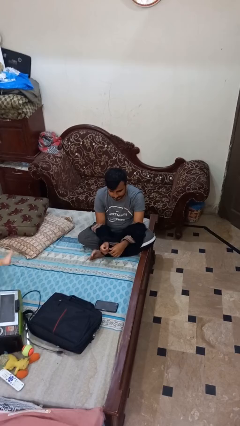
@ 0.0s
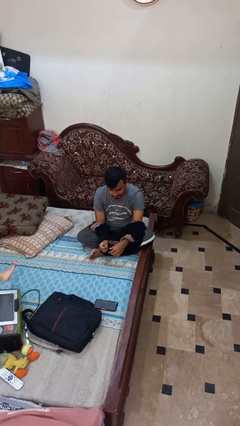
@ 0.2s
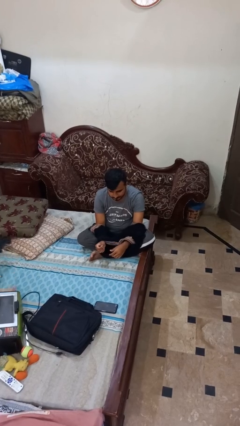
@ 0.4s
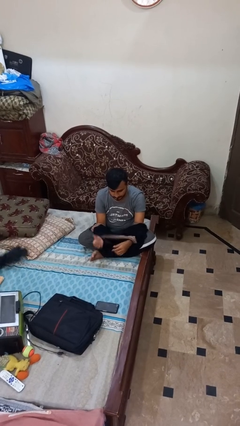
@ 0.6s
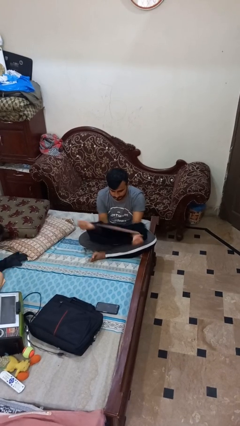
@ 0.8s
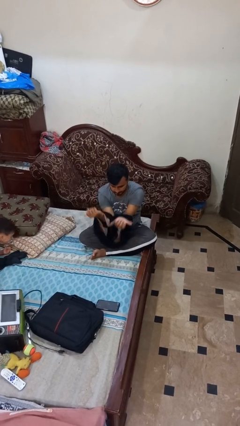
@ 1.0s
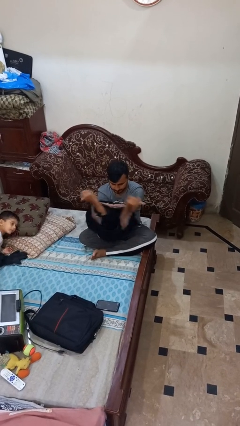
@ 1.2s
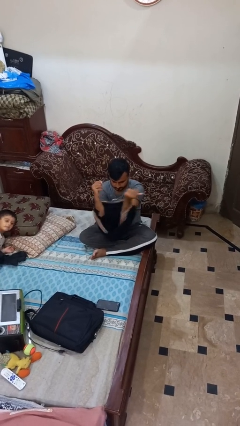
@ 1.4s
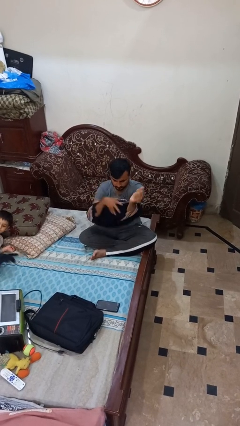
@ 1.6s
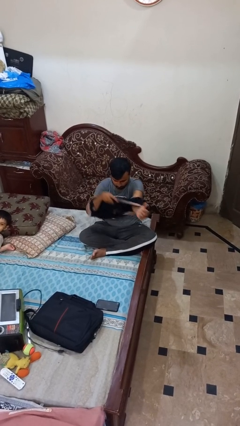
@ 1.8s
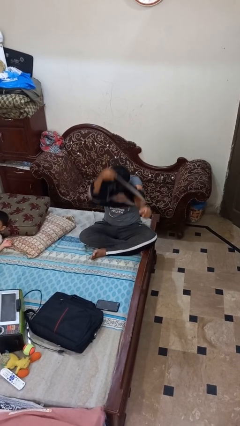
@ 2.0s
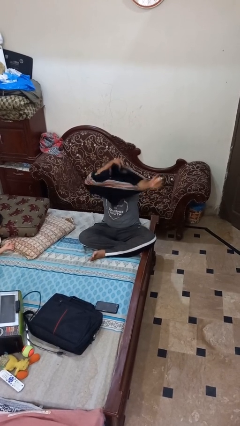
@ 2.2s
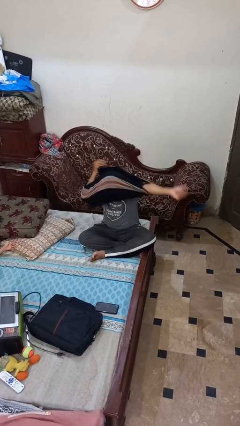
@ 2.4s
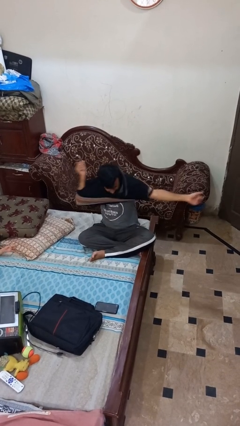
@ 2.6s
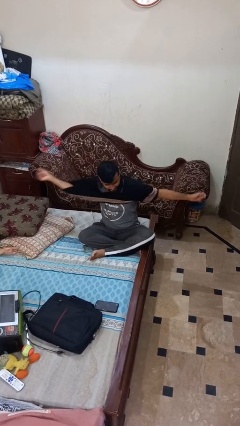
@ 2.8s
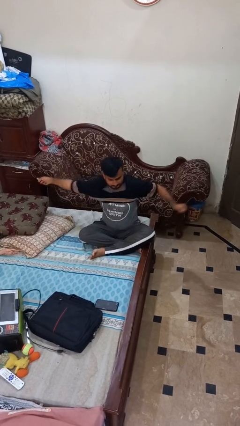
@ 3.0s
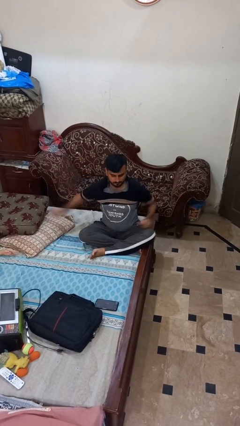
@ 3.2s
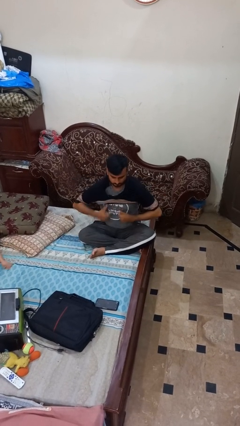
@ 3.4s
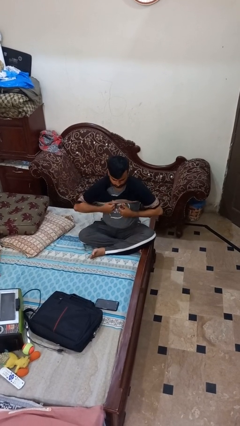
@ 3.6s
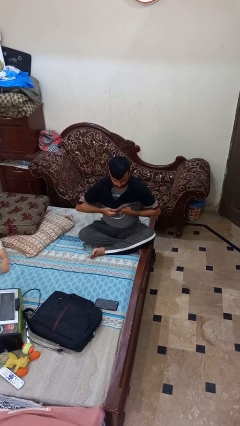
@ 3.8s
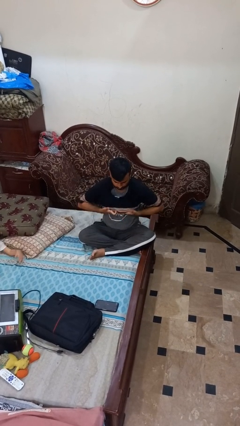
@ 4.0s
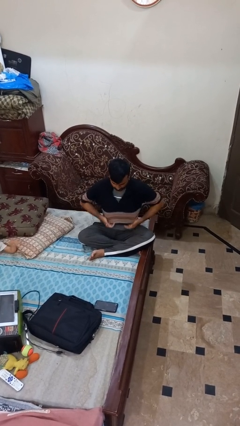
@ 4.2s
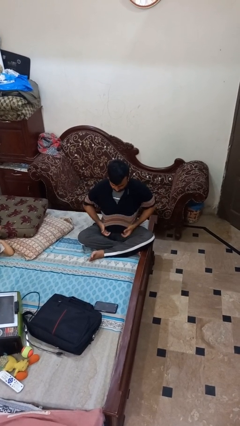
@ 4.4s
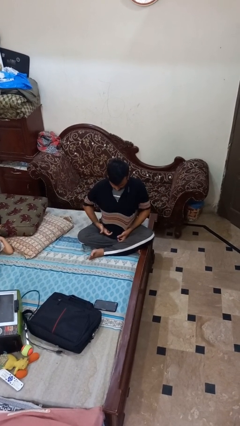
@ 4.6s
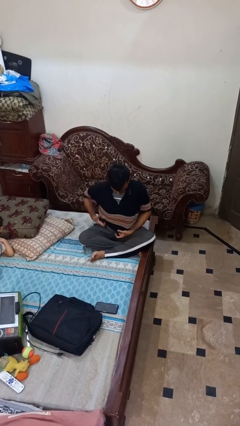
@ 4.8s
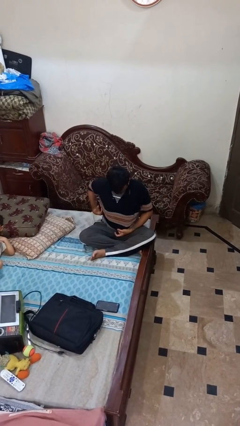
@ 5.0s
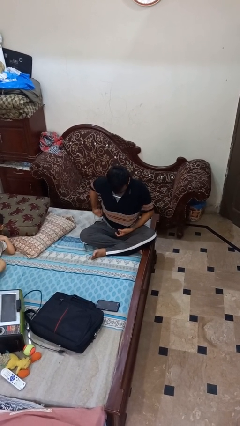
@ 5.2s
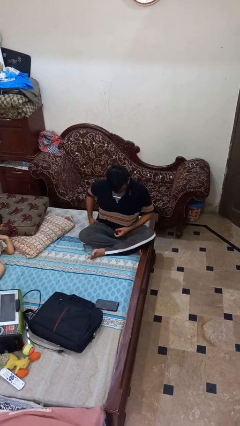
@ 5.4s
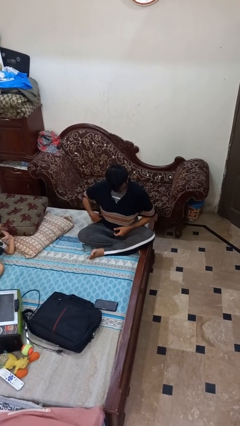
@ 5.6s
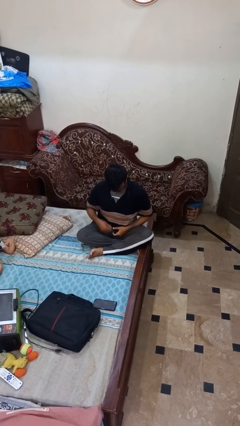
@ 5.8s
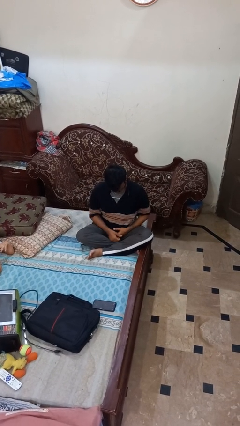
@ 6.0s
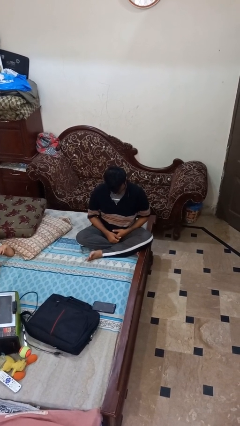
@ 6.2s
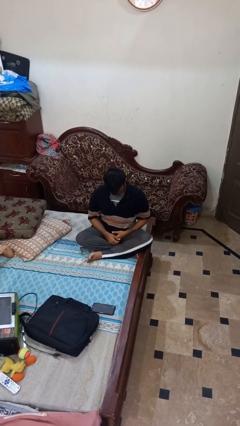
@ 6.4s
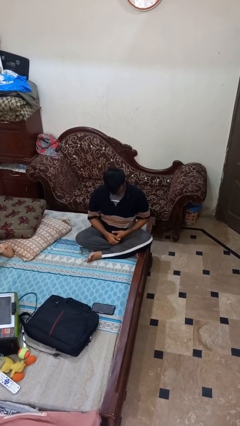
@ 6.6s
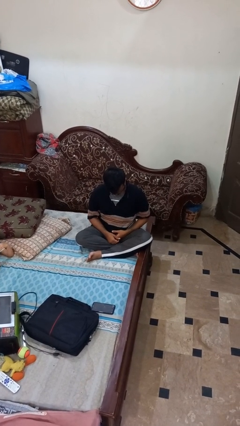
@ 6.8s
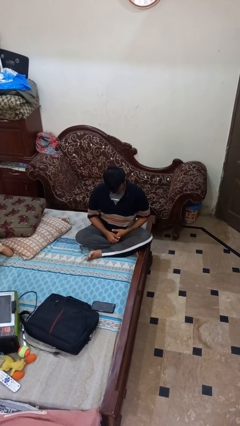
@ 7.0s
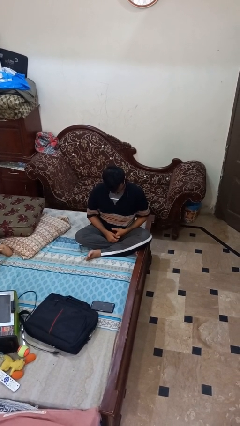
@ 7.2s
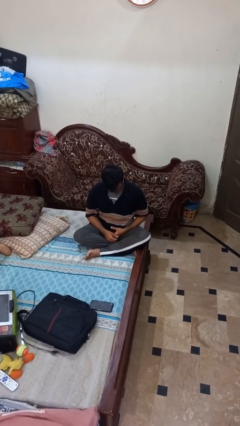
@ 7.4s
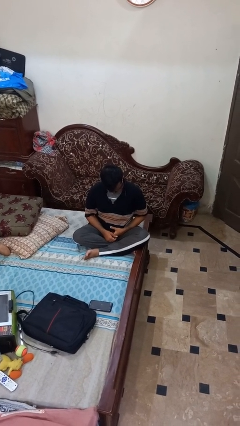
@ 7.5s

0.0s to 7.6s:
person puts on shirt

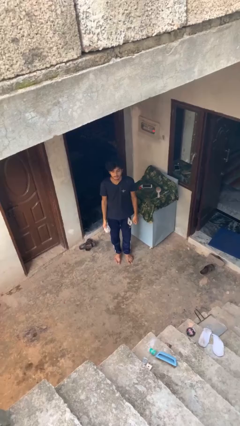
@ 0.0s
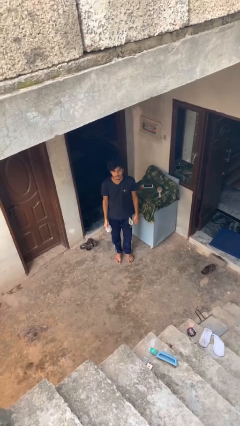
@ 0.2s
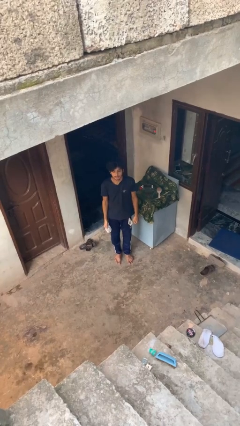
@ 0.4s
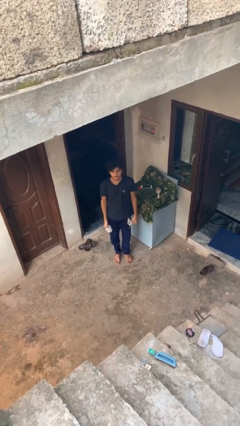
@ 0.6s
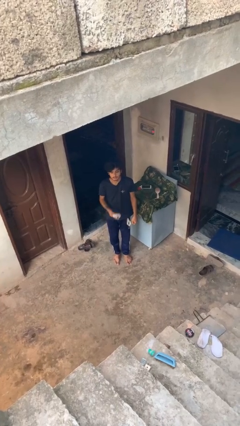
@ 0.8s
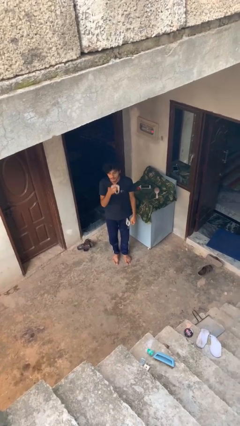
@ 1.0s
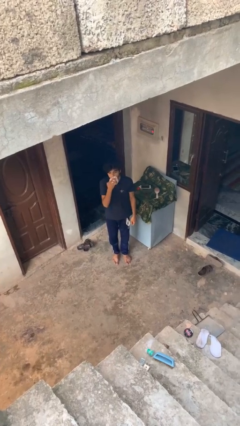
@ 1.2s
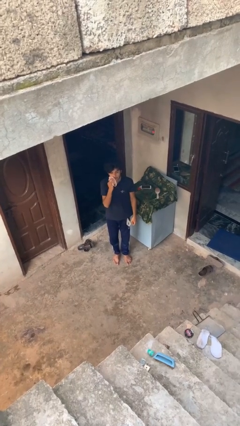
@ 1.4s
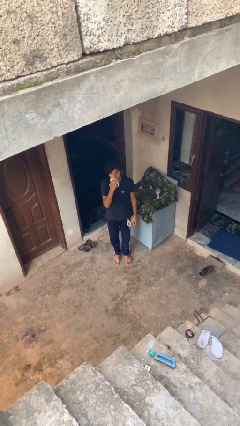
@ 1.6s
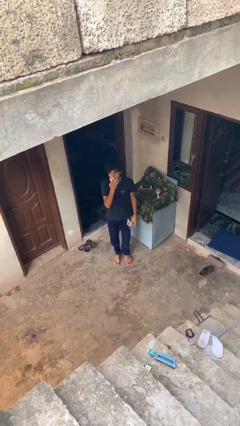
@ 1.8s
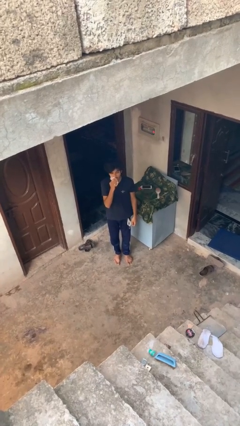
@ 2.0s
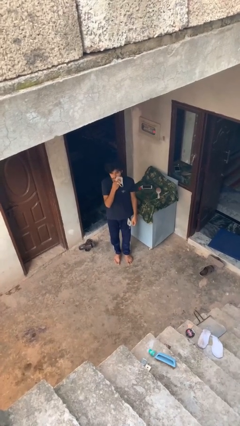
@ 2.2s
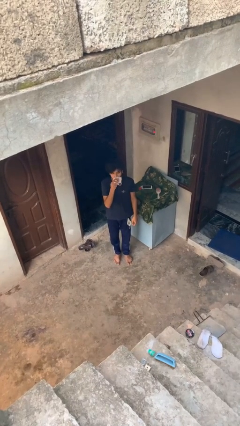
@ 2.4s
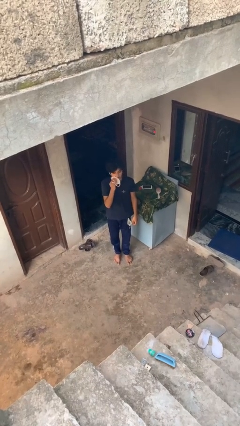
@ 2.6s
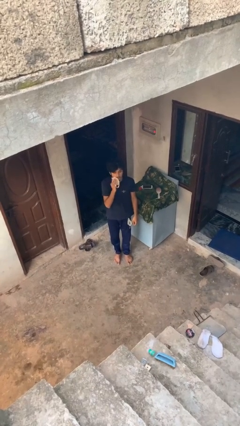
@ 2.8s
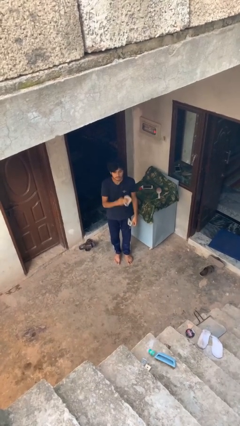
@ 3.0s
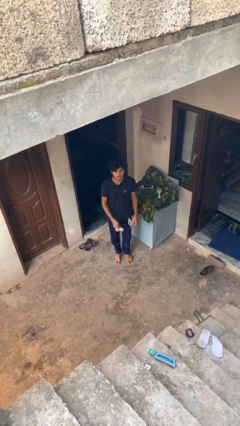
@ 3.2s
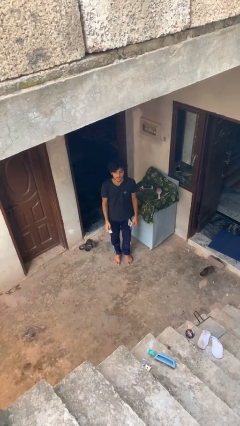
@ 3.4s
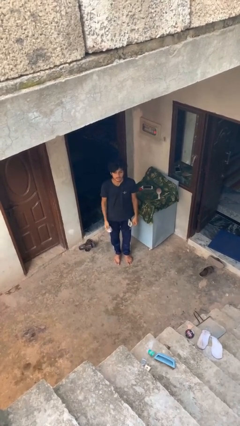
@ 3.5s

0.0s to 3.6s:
person wipes mouth with napkin

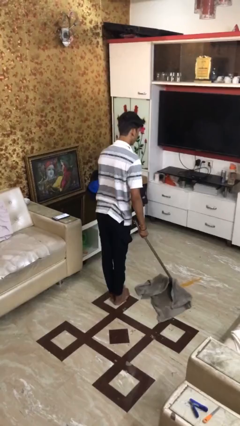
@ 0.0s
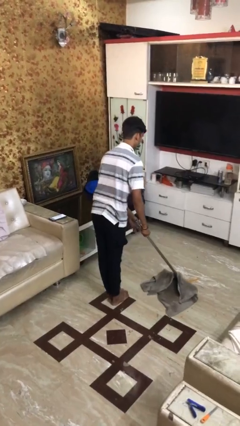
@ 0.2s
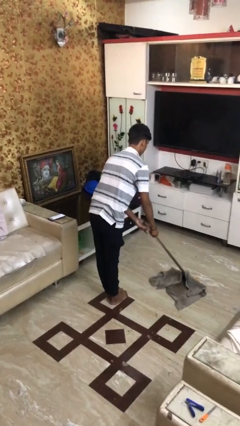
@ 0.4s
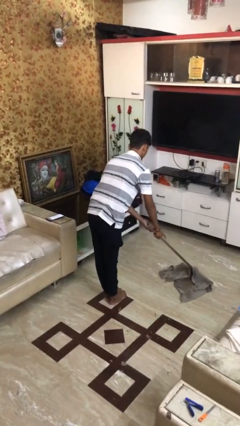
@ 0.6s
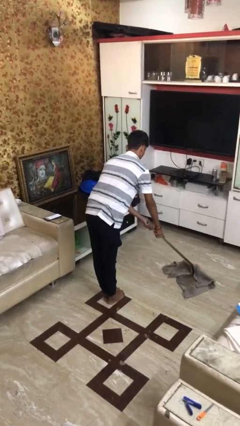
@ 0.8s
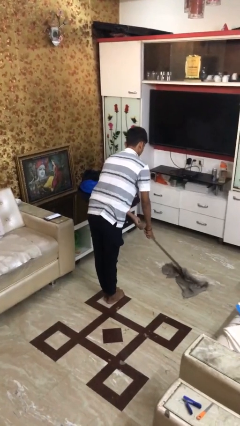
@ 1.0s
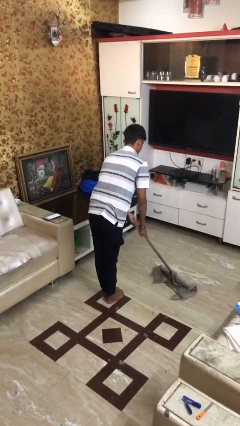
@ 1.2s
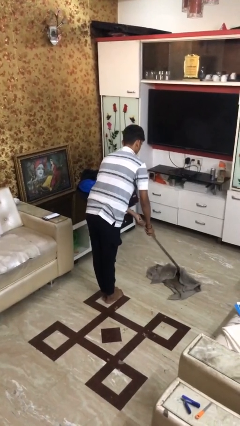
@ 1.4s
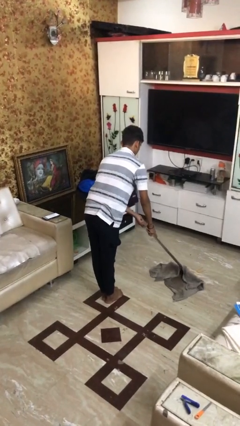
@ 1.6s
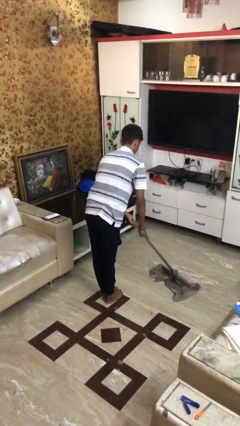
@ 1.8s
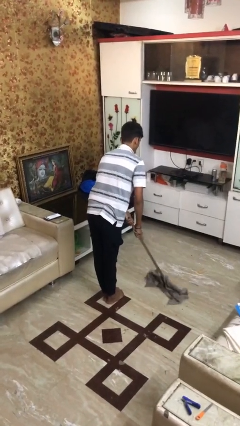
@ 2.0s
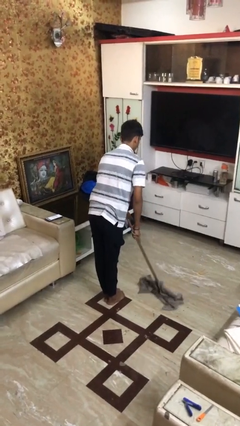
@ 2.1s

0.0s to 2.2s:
person mops

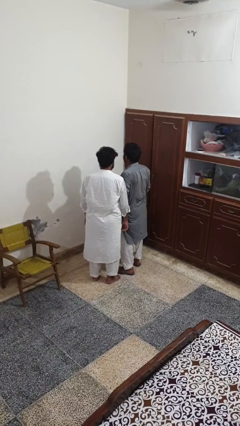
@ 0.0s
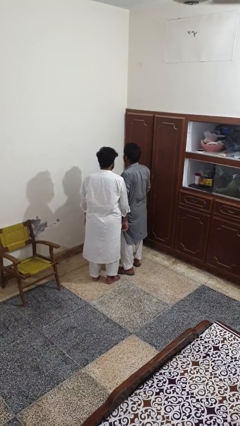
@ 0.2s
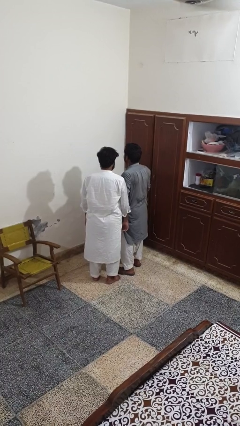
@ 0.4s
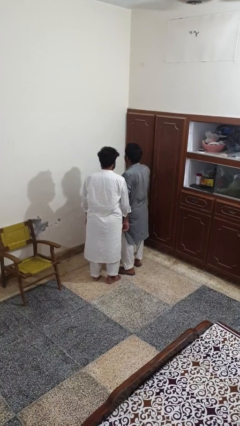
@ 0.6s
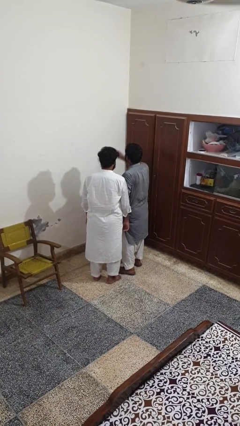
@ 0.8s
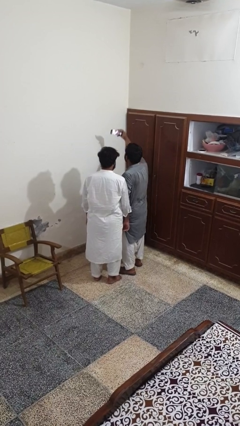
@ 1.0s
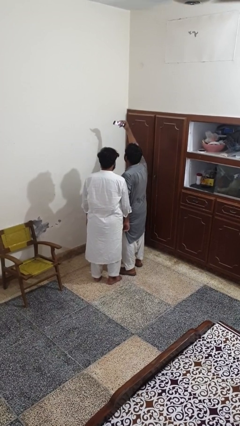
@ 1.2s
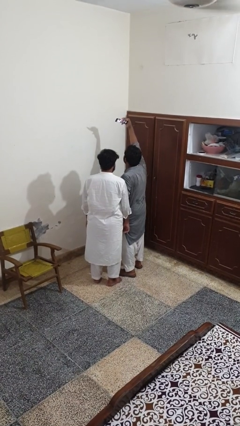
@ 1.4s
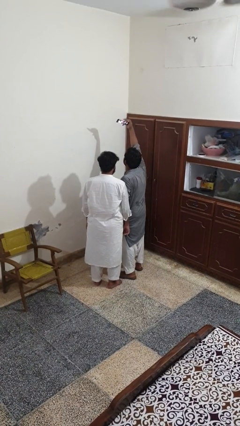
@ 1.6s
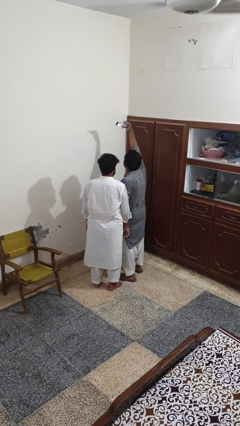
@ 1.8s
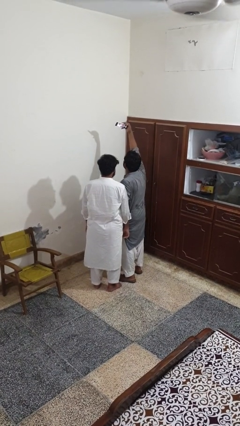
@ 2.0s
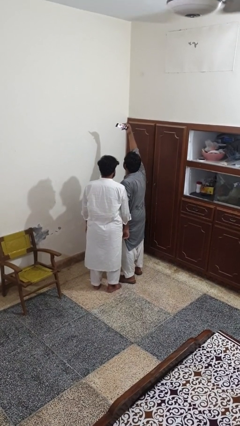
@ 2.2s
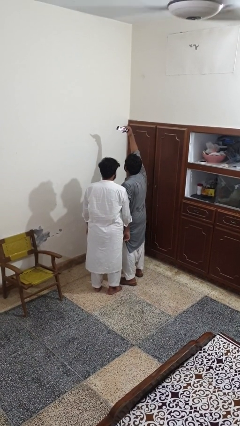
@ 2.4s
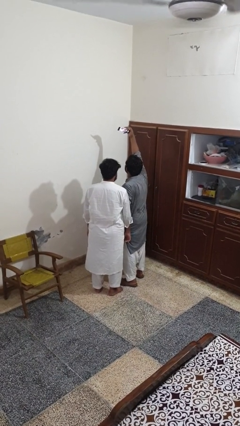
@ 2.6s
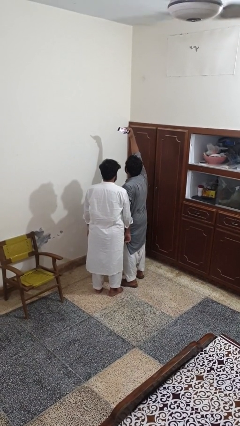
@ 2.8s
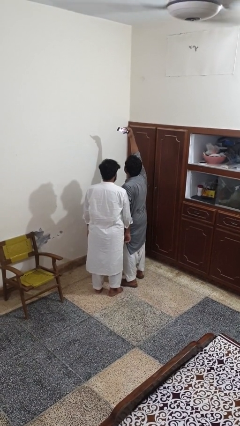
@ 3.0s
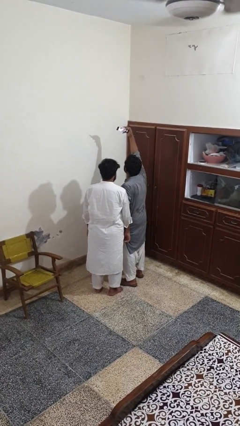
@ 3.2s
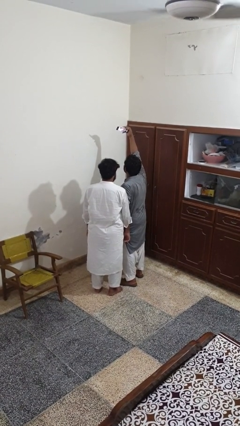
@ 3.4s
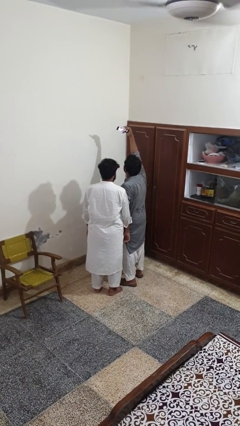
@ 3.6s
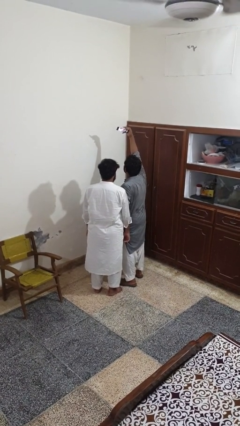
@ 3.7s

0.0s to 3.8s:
person takes selfie with person

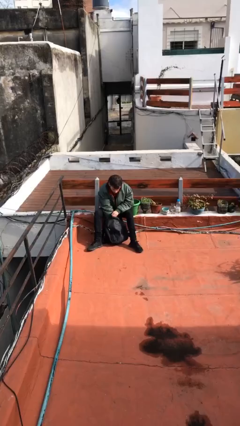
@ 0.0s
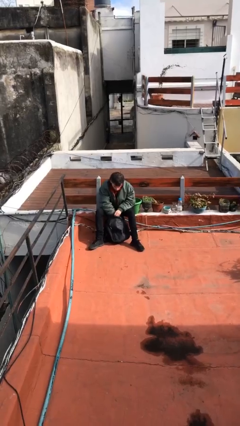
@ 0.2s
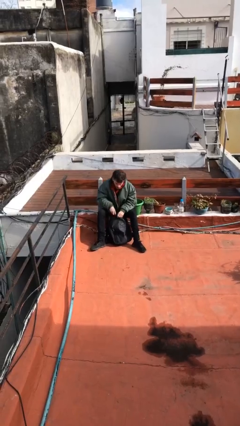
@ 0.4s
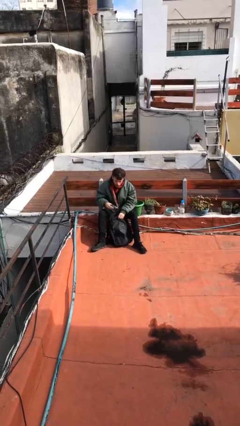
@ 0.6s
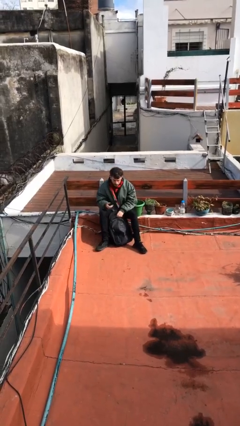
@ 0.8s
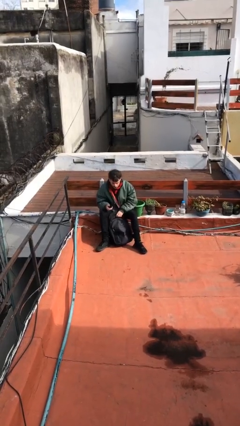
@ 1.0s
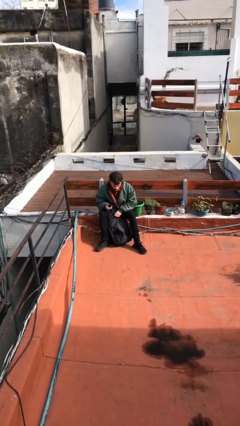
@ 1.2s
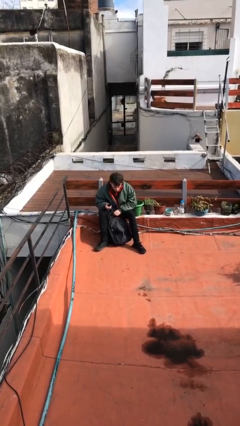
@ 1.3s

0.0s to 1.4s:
person takes object from backpack
